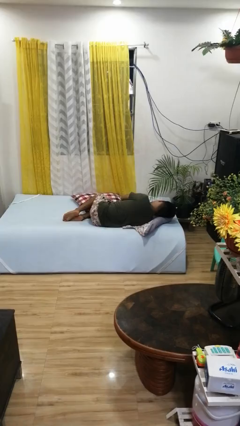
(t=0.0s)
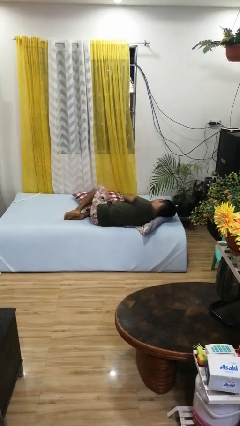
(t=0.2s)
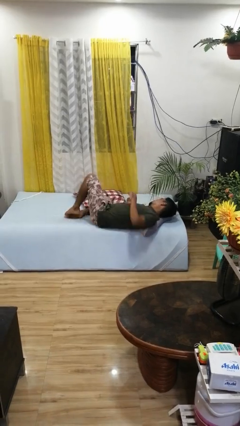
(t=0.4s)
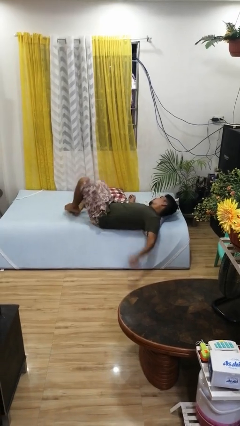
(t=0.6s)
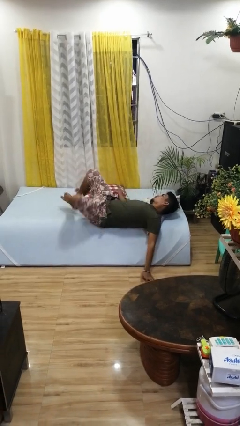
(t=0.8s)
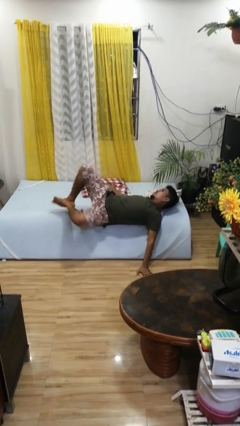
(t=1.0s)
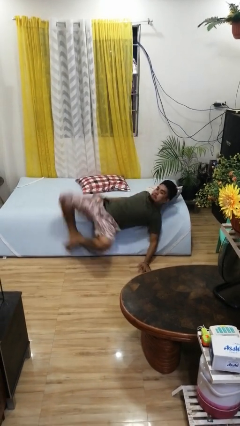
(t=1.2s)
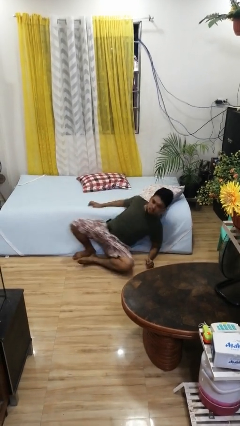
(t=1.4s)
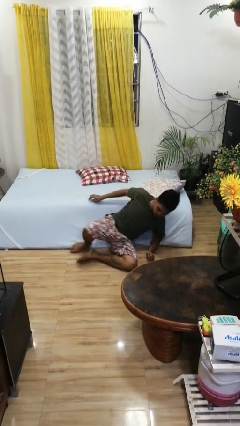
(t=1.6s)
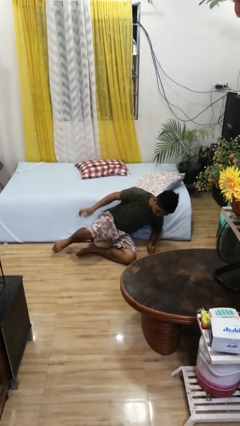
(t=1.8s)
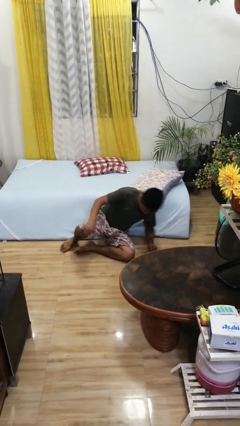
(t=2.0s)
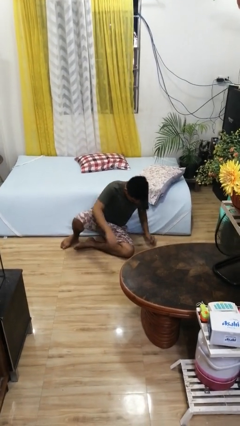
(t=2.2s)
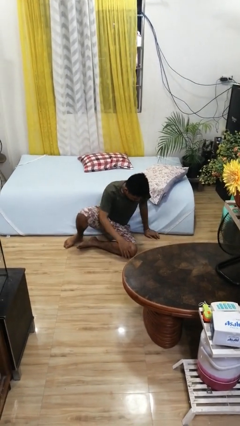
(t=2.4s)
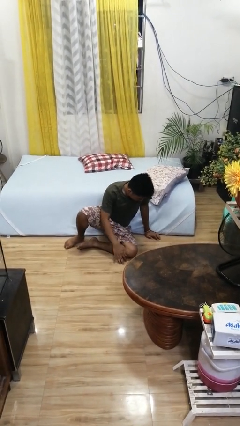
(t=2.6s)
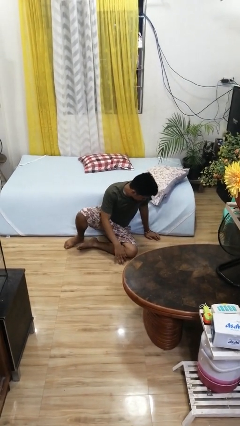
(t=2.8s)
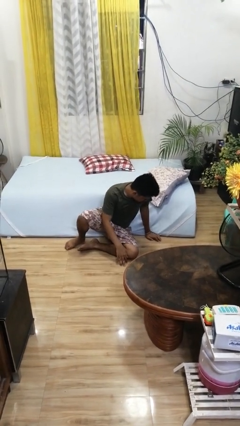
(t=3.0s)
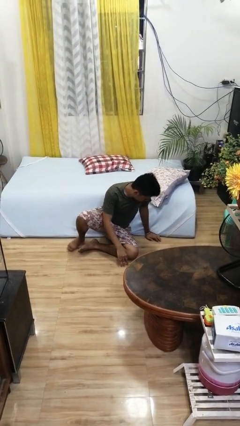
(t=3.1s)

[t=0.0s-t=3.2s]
person falls from bed

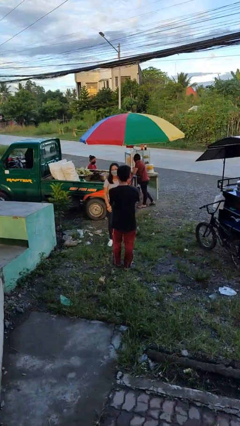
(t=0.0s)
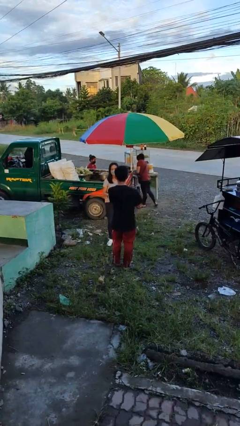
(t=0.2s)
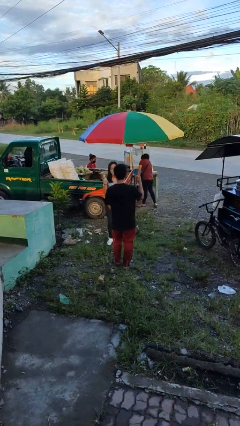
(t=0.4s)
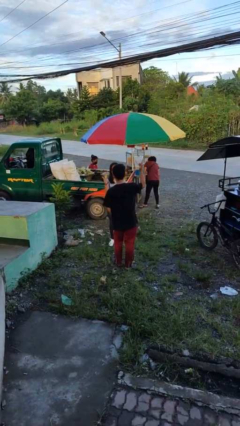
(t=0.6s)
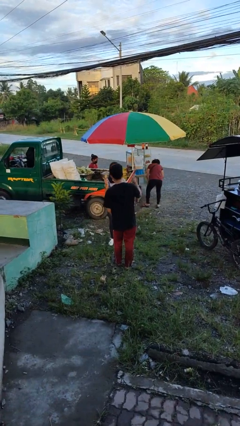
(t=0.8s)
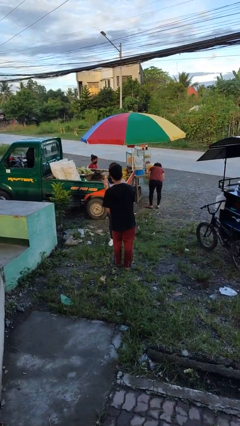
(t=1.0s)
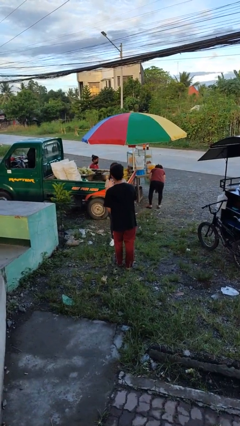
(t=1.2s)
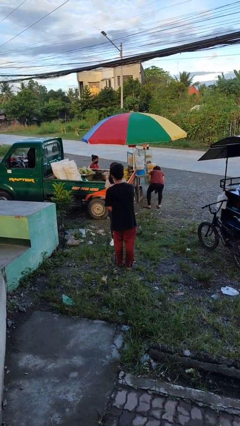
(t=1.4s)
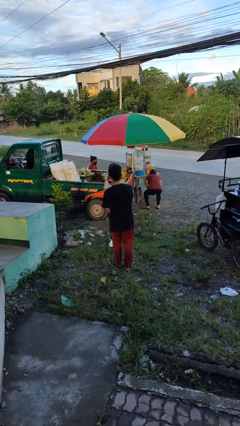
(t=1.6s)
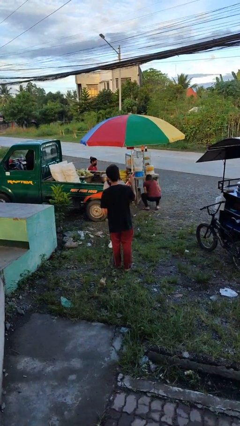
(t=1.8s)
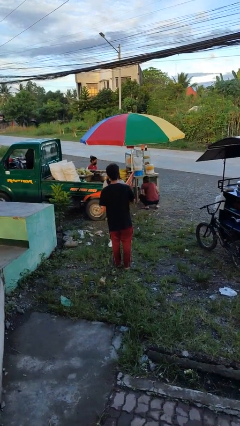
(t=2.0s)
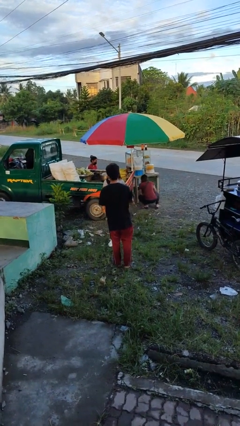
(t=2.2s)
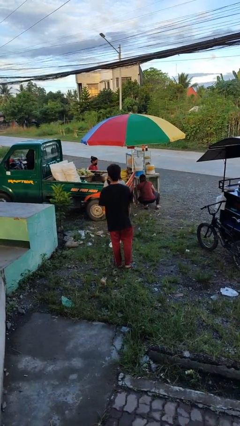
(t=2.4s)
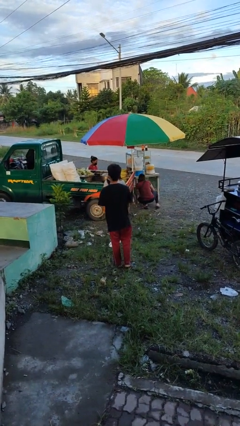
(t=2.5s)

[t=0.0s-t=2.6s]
person talks to person

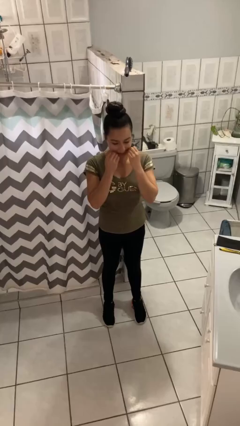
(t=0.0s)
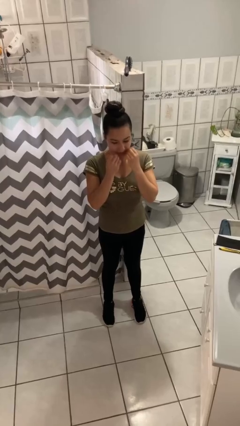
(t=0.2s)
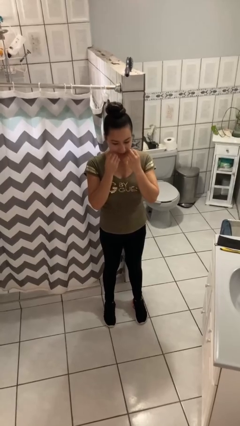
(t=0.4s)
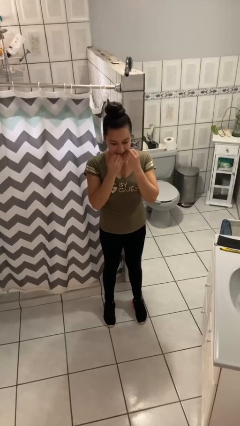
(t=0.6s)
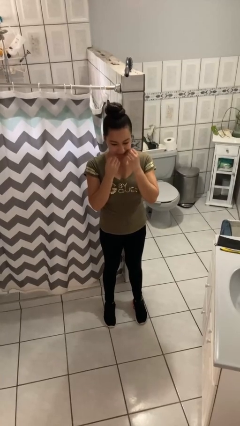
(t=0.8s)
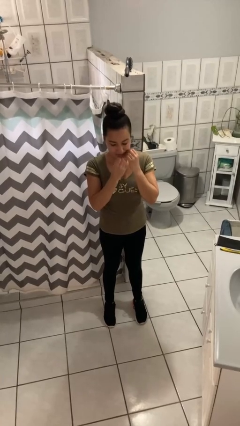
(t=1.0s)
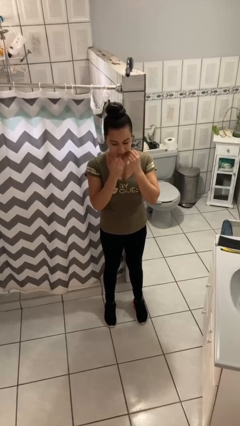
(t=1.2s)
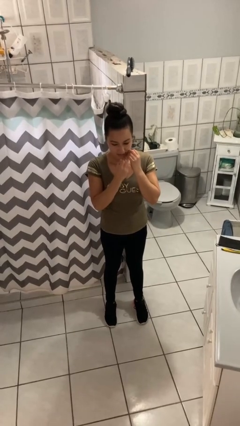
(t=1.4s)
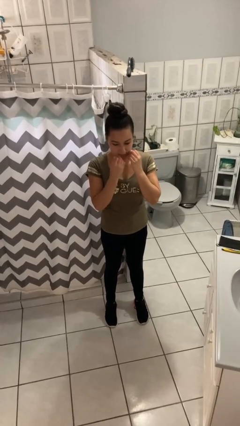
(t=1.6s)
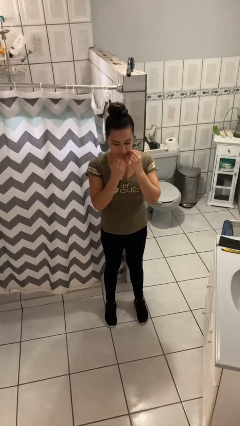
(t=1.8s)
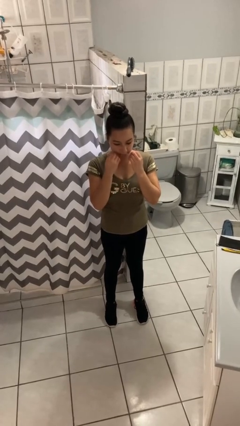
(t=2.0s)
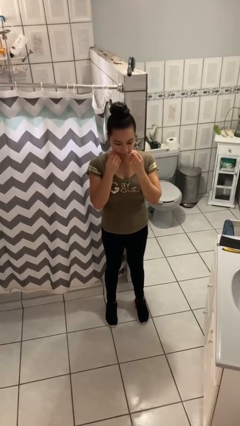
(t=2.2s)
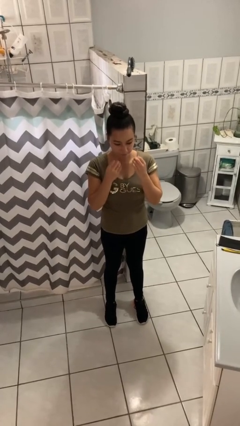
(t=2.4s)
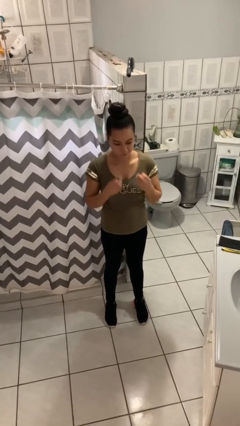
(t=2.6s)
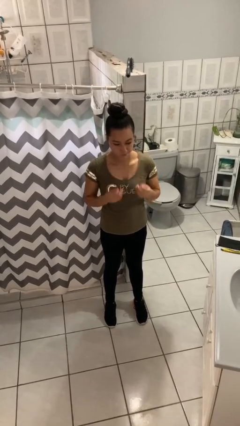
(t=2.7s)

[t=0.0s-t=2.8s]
person flosses

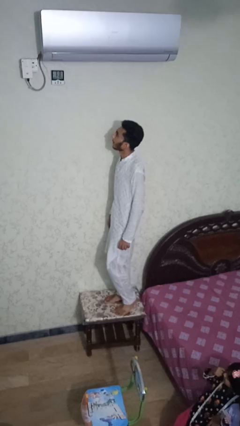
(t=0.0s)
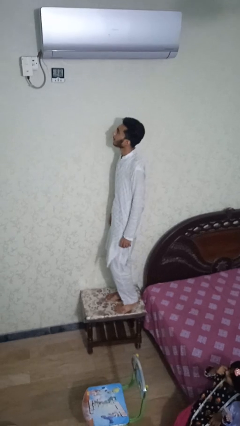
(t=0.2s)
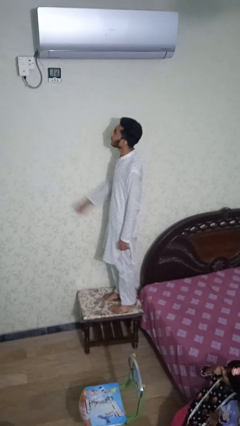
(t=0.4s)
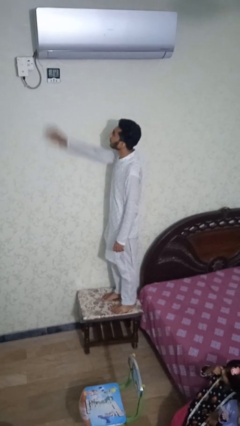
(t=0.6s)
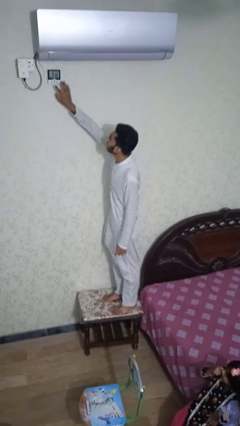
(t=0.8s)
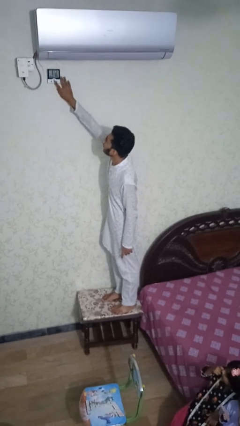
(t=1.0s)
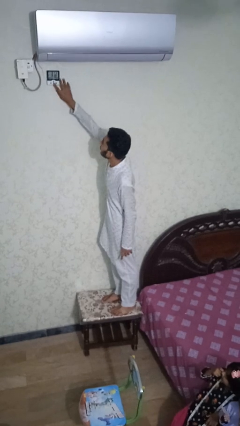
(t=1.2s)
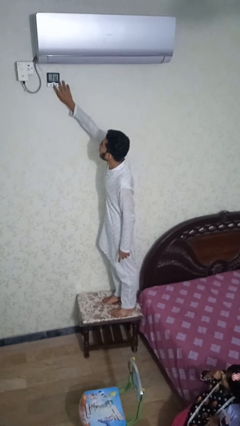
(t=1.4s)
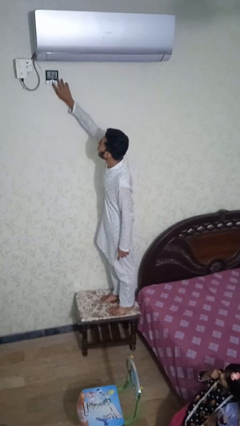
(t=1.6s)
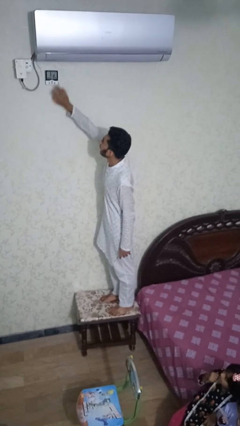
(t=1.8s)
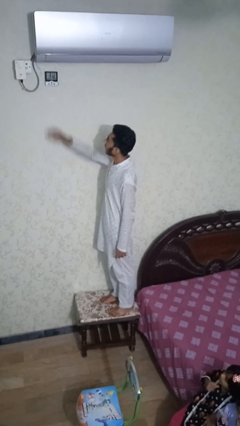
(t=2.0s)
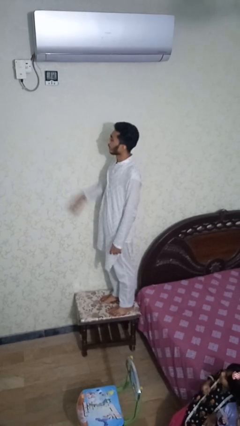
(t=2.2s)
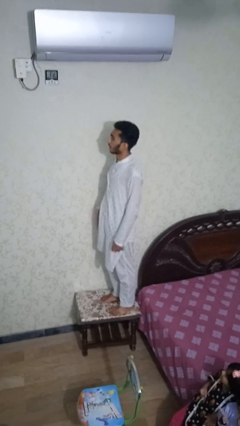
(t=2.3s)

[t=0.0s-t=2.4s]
person adjusts thermostat

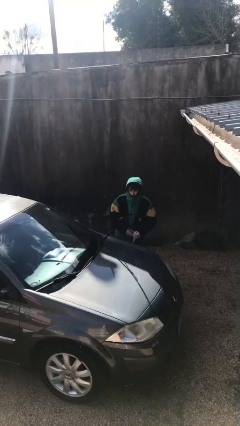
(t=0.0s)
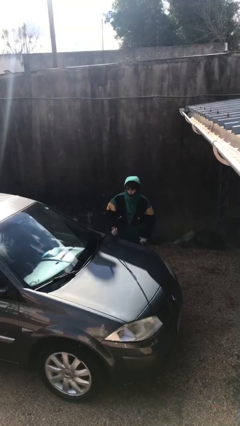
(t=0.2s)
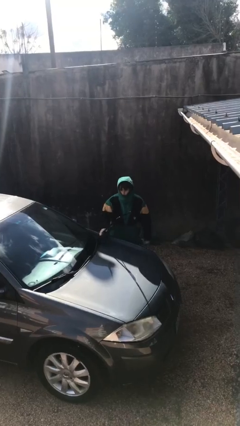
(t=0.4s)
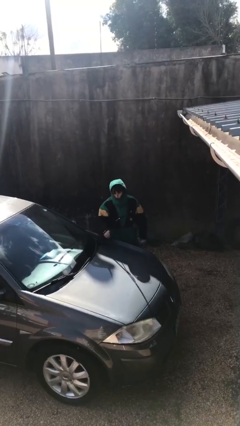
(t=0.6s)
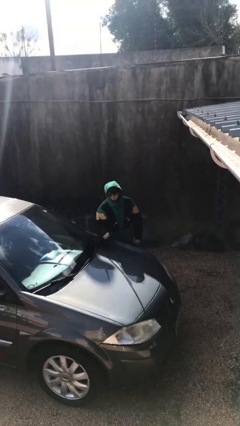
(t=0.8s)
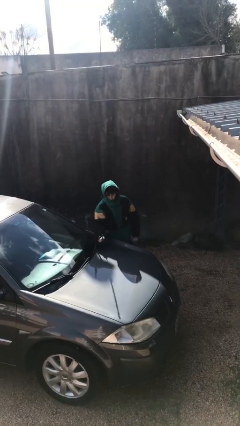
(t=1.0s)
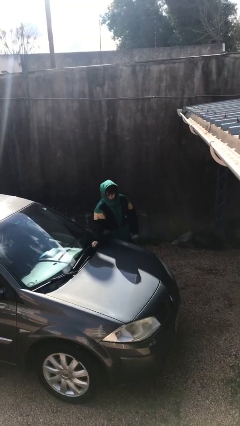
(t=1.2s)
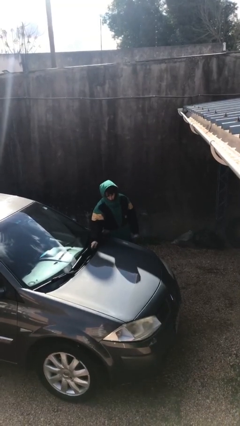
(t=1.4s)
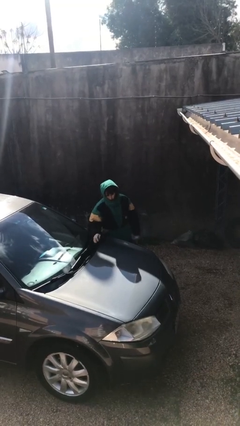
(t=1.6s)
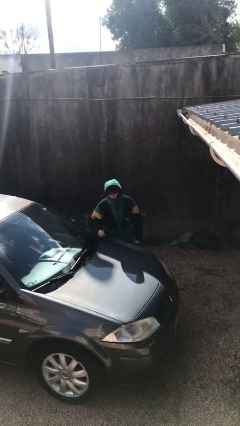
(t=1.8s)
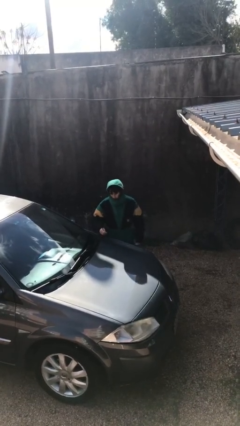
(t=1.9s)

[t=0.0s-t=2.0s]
person flips down car wipers

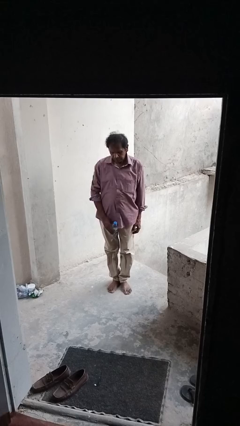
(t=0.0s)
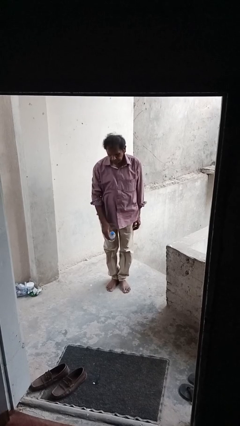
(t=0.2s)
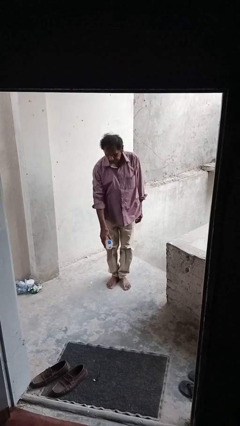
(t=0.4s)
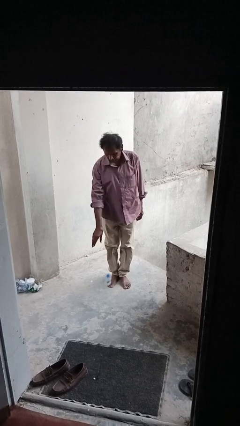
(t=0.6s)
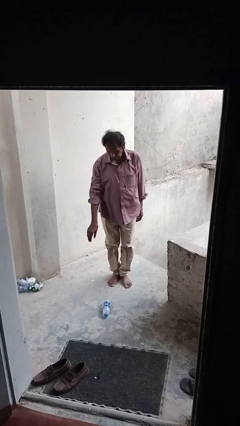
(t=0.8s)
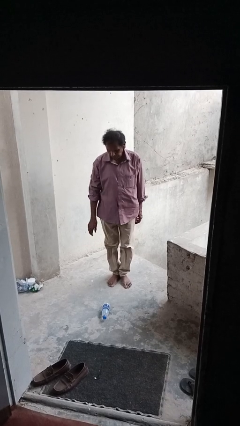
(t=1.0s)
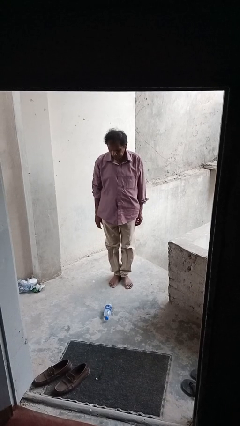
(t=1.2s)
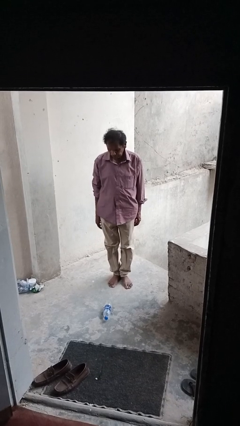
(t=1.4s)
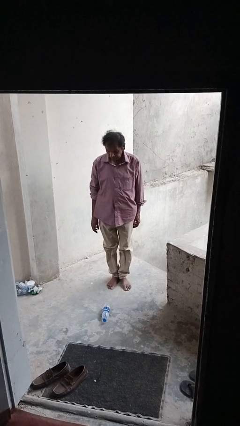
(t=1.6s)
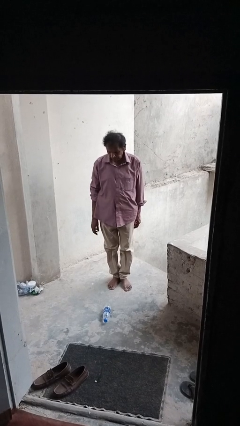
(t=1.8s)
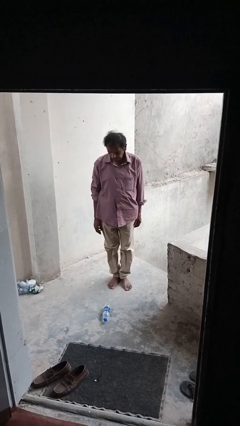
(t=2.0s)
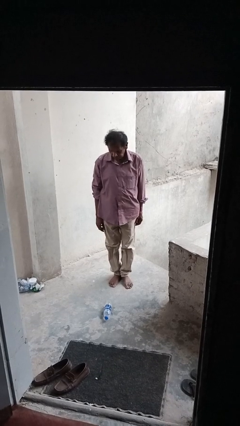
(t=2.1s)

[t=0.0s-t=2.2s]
person throws object to ground

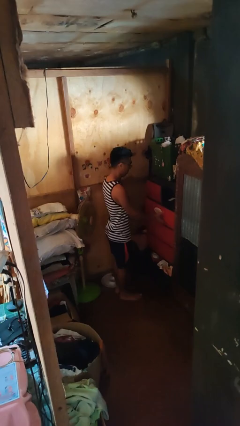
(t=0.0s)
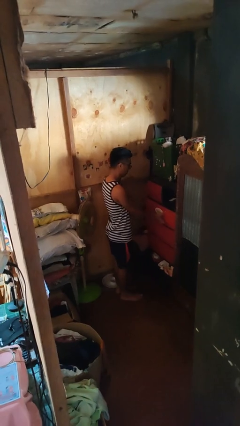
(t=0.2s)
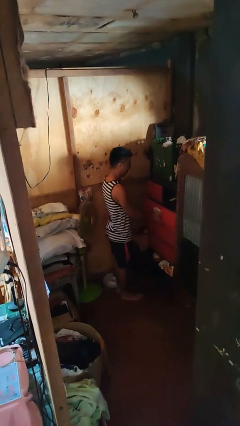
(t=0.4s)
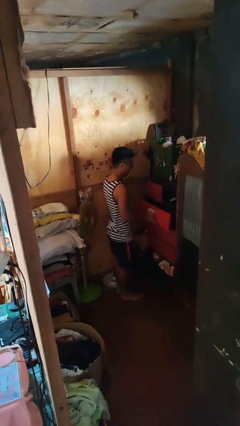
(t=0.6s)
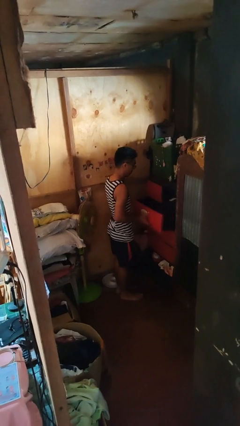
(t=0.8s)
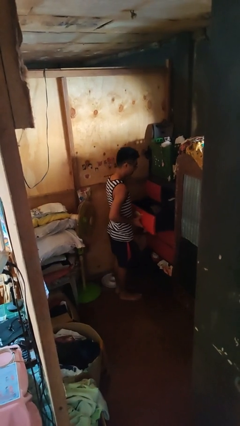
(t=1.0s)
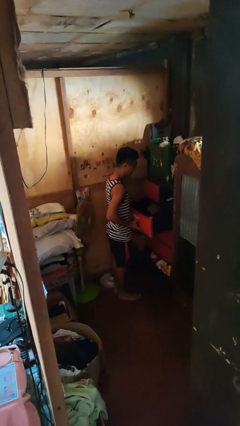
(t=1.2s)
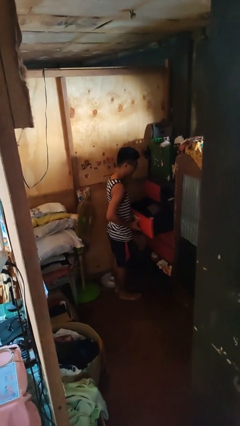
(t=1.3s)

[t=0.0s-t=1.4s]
person opens dresser drawer

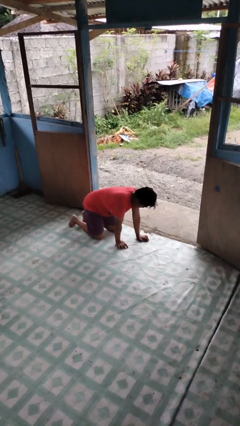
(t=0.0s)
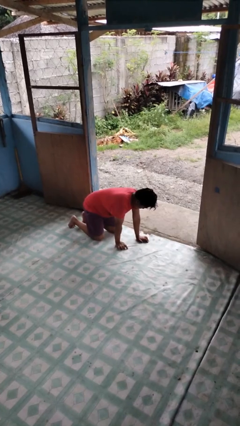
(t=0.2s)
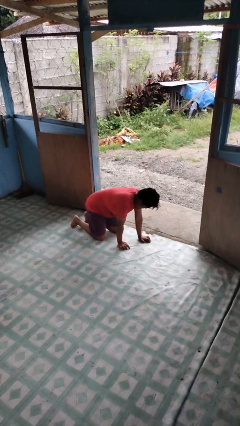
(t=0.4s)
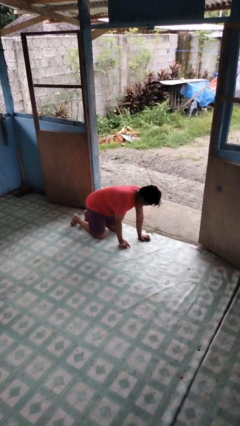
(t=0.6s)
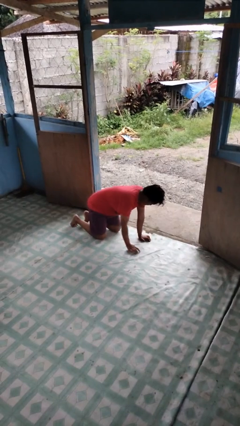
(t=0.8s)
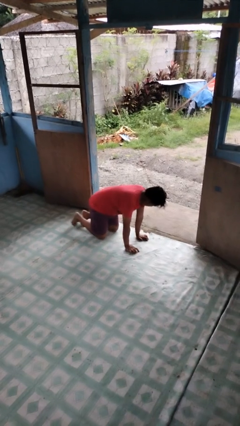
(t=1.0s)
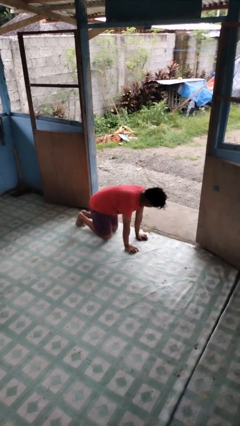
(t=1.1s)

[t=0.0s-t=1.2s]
person crawls
